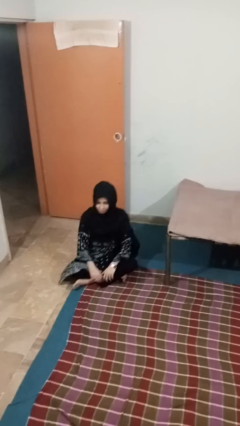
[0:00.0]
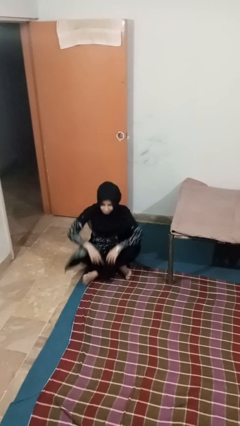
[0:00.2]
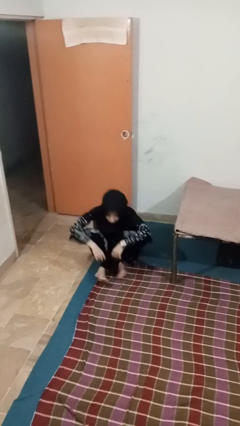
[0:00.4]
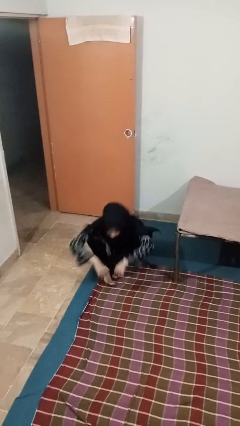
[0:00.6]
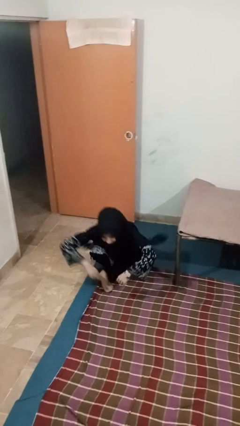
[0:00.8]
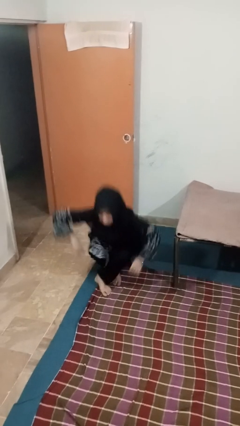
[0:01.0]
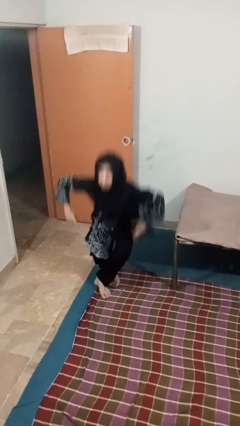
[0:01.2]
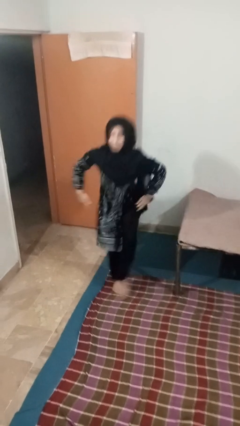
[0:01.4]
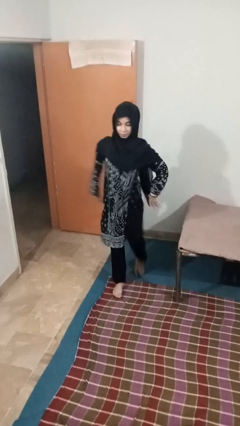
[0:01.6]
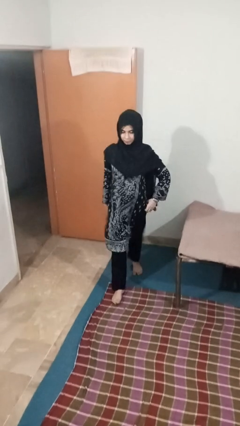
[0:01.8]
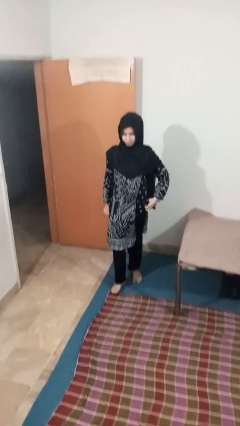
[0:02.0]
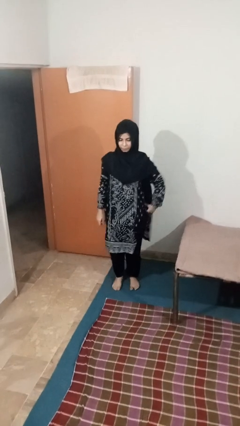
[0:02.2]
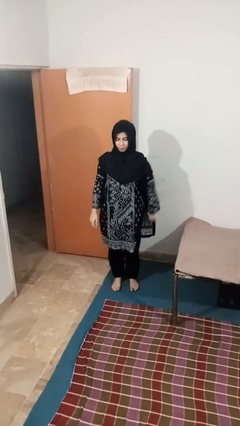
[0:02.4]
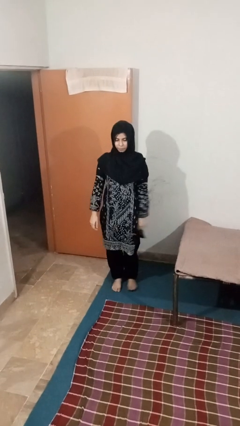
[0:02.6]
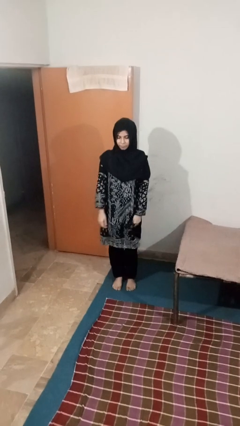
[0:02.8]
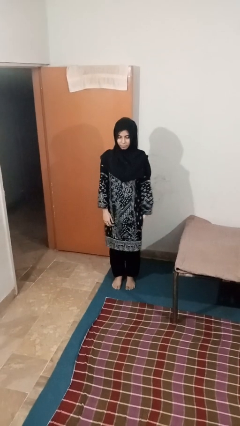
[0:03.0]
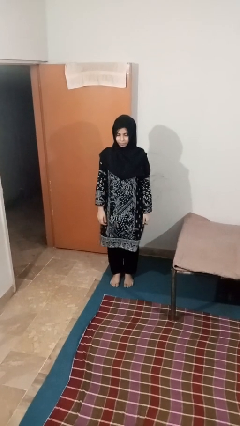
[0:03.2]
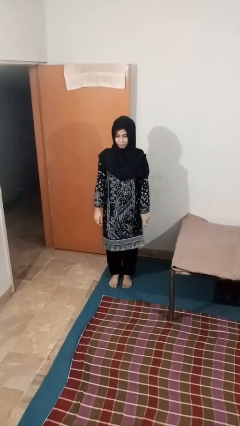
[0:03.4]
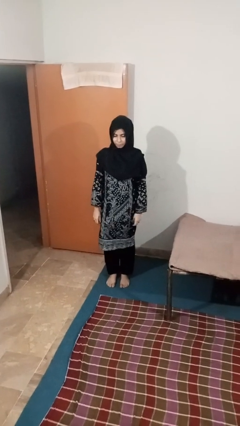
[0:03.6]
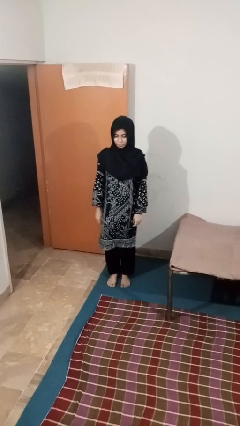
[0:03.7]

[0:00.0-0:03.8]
person stands up from floor

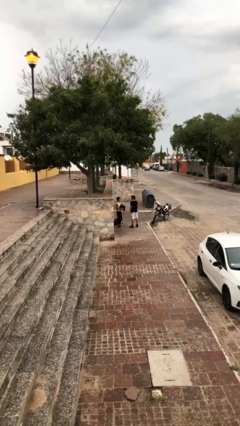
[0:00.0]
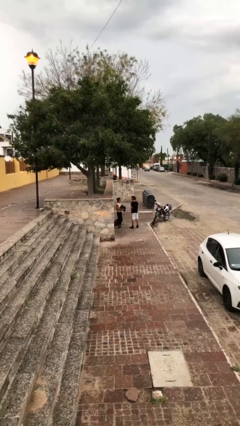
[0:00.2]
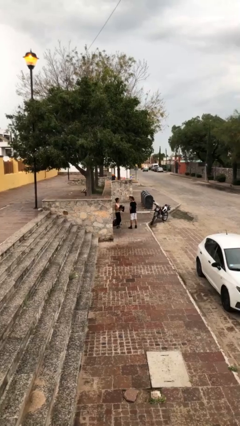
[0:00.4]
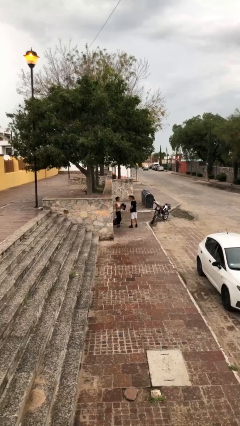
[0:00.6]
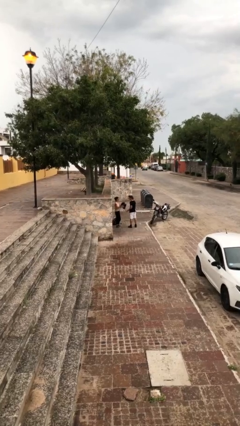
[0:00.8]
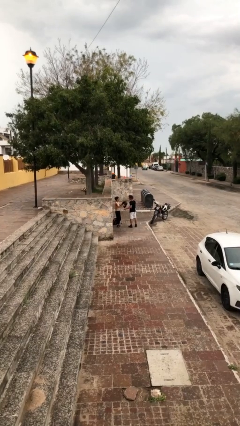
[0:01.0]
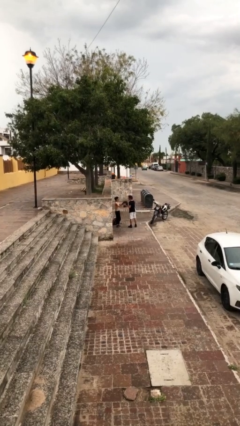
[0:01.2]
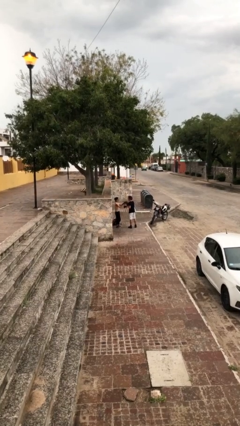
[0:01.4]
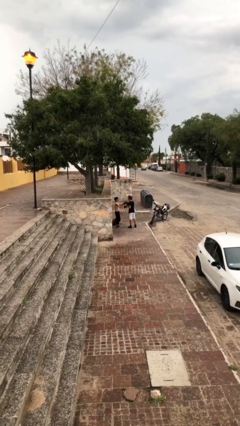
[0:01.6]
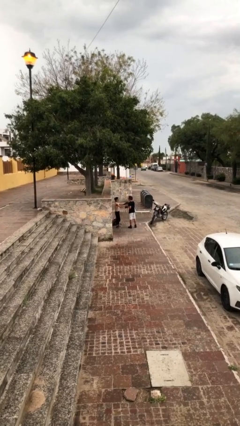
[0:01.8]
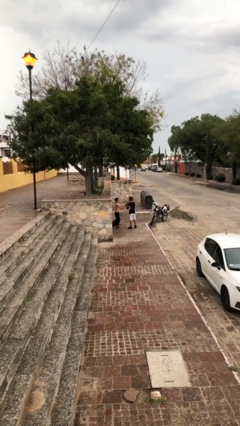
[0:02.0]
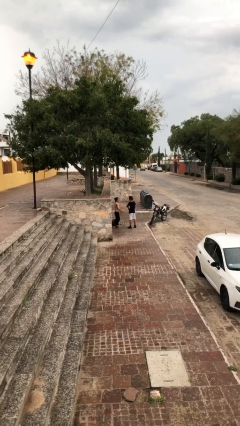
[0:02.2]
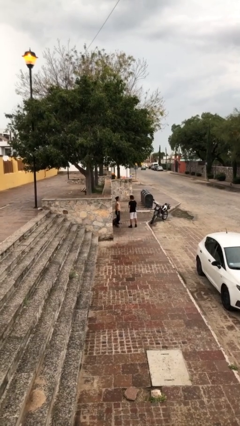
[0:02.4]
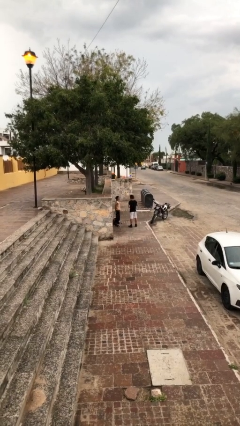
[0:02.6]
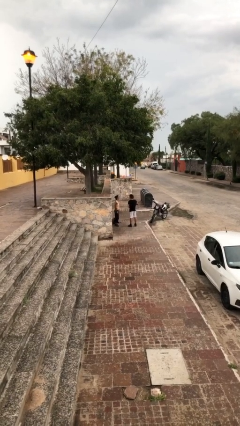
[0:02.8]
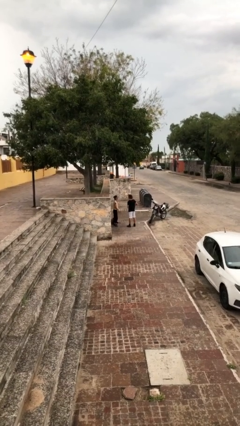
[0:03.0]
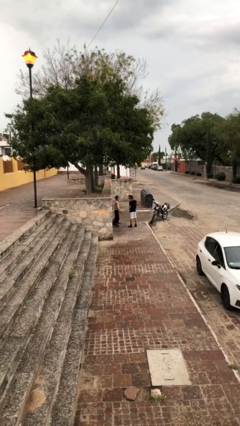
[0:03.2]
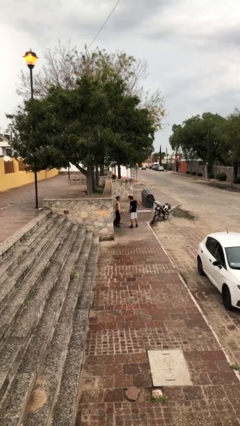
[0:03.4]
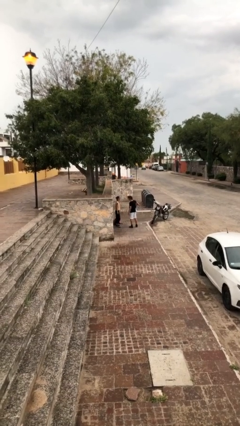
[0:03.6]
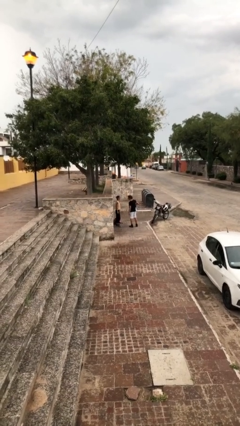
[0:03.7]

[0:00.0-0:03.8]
person transfers object to person

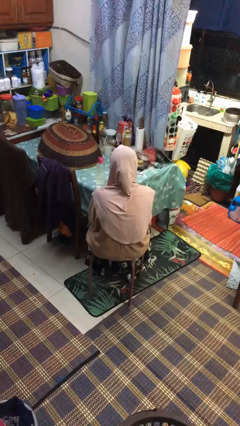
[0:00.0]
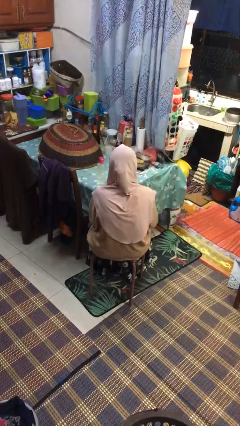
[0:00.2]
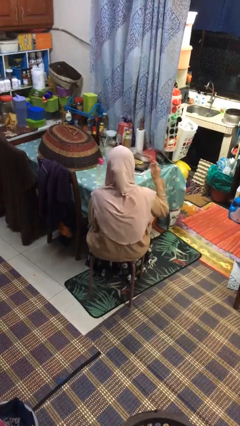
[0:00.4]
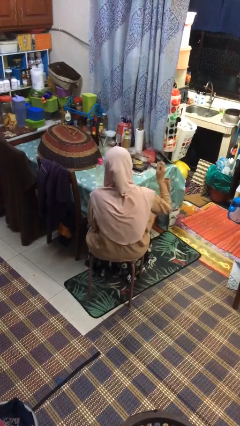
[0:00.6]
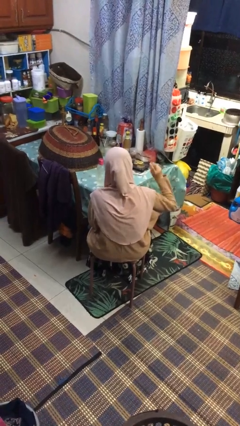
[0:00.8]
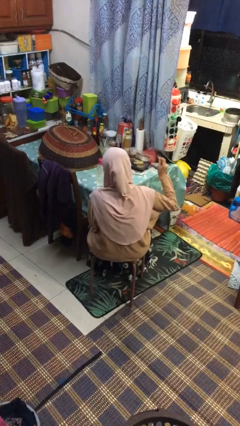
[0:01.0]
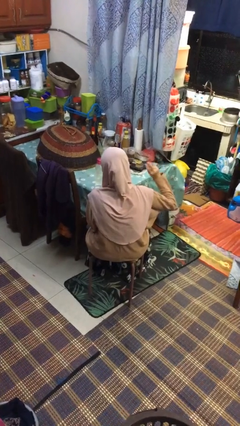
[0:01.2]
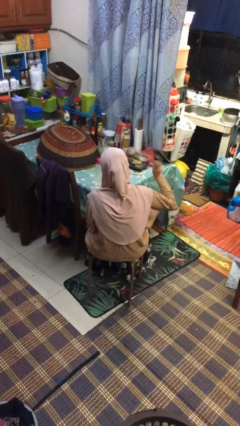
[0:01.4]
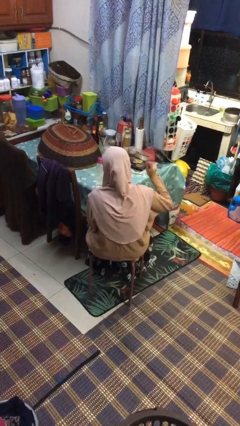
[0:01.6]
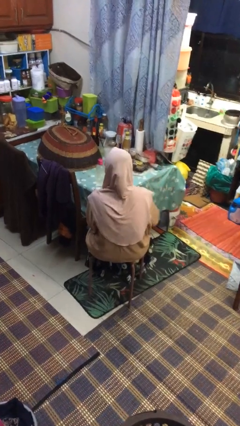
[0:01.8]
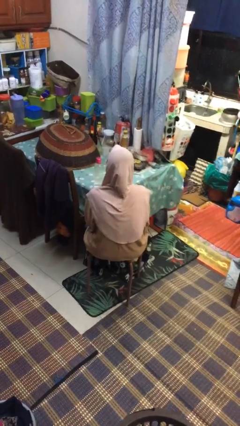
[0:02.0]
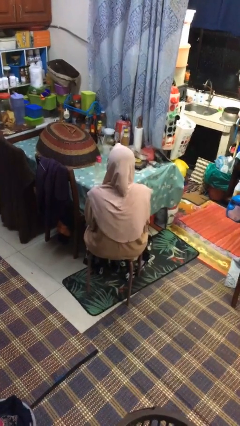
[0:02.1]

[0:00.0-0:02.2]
person snaps fingers

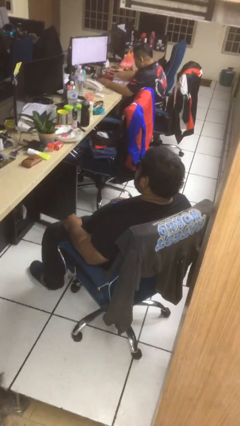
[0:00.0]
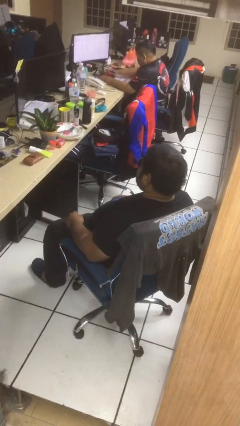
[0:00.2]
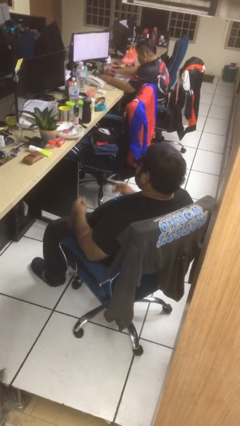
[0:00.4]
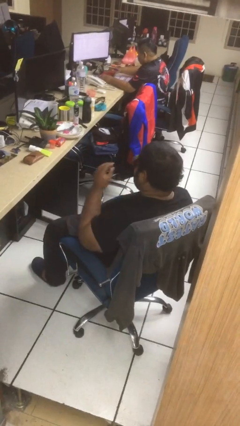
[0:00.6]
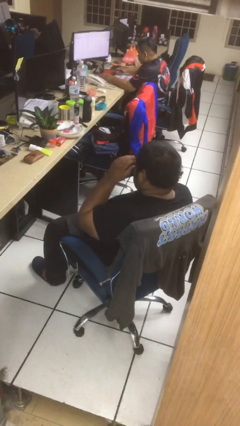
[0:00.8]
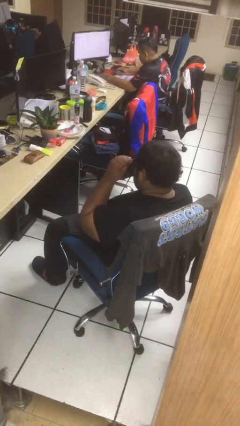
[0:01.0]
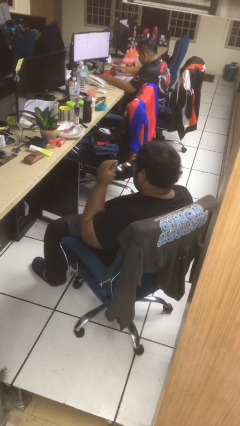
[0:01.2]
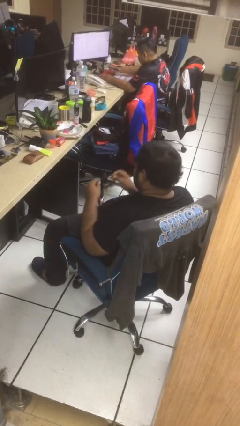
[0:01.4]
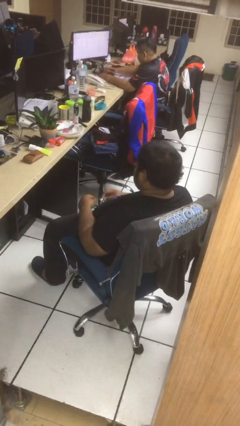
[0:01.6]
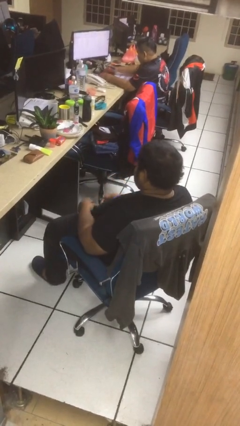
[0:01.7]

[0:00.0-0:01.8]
person takes off sunglasses

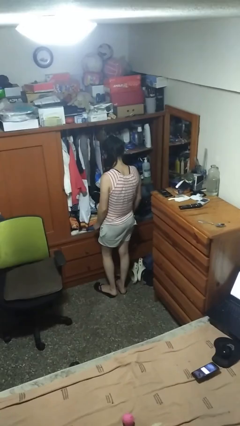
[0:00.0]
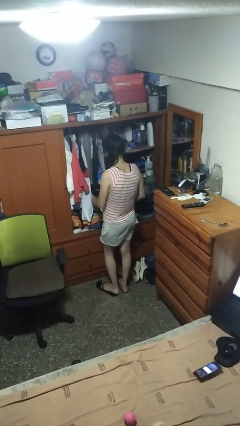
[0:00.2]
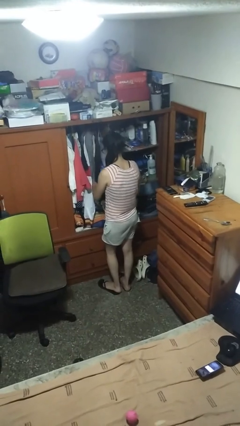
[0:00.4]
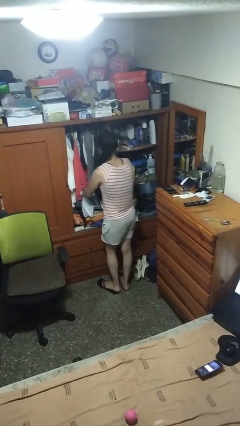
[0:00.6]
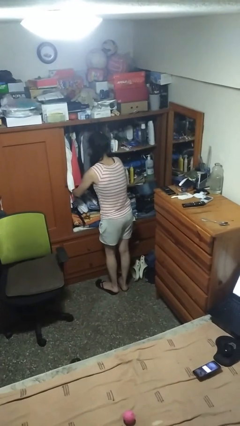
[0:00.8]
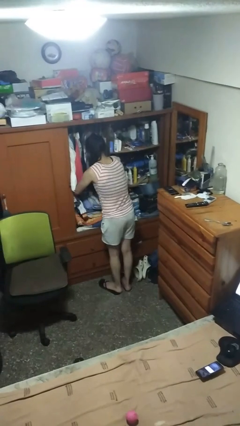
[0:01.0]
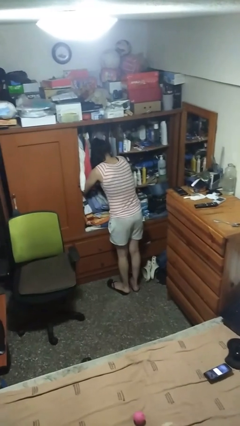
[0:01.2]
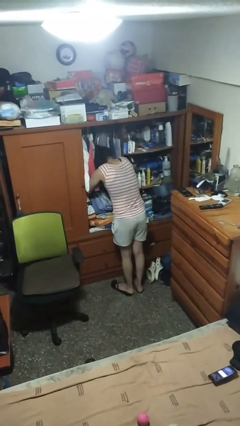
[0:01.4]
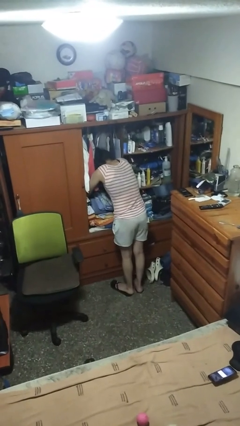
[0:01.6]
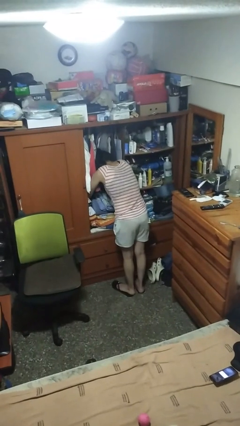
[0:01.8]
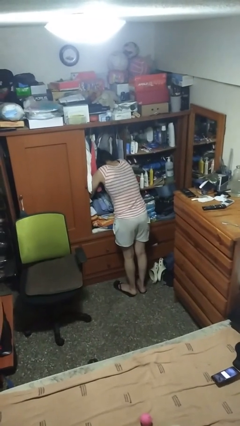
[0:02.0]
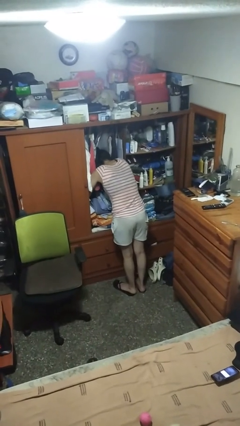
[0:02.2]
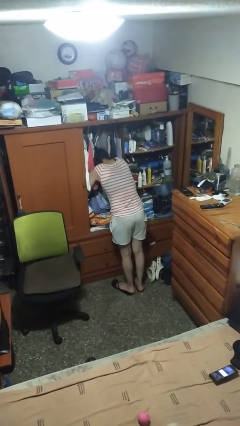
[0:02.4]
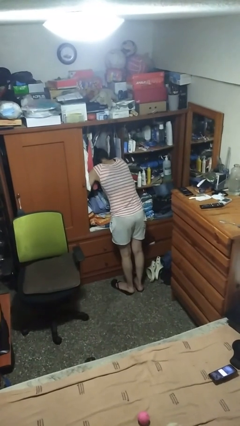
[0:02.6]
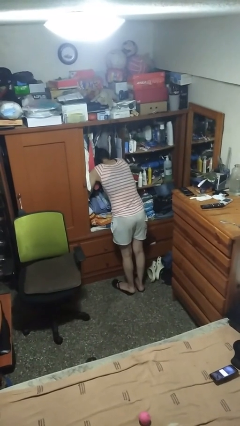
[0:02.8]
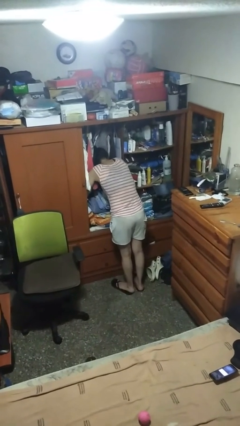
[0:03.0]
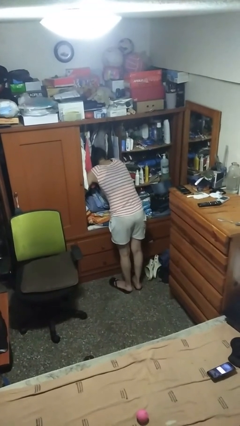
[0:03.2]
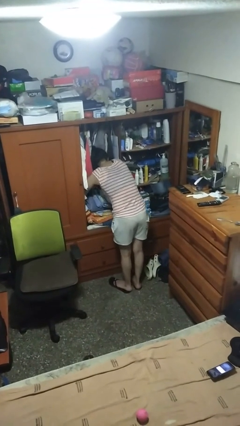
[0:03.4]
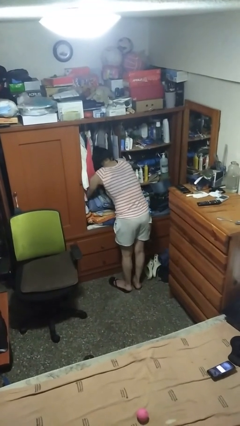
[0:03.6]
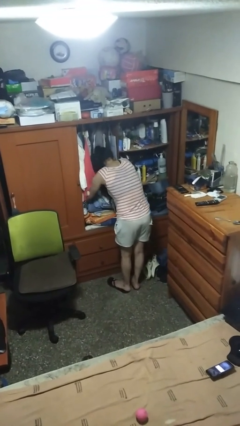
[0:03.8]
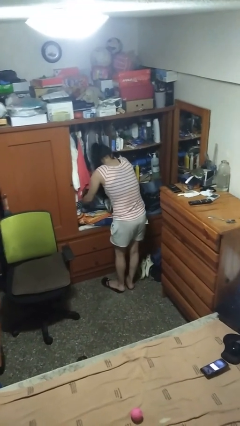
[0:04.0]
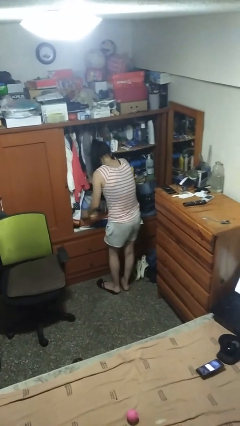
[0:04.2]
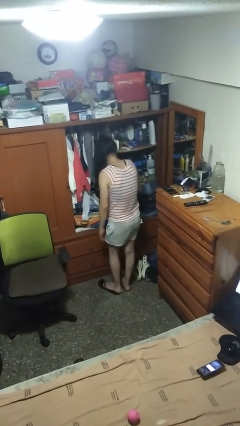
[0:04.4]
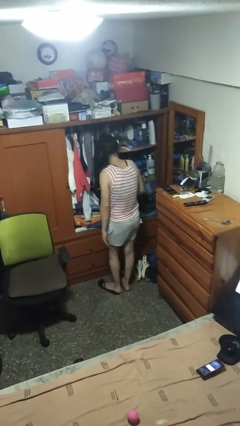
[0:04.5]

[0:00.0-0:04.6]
person searches in cabinet

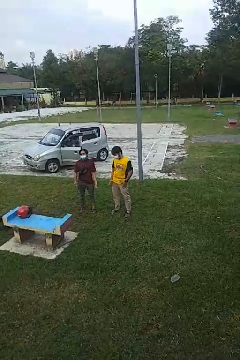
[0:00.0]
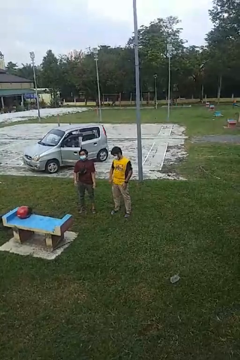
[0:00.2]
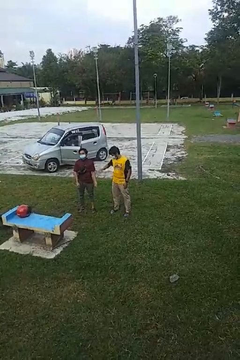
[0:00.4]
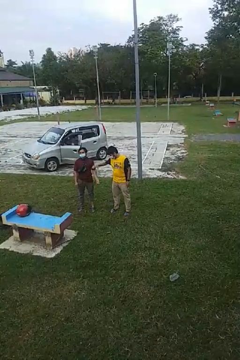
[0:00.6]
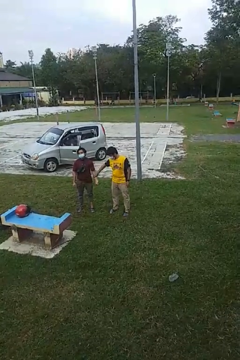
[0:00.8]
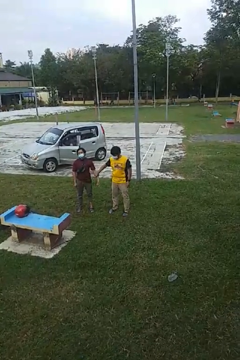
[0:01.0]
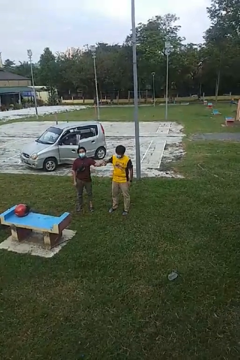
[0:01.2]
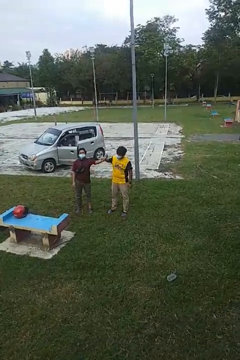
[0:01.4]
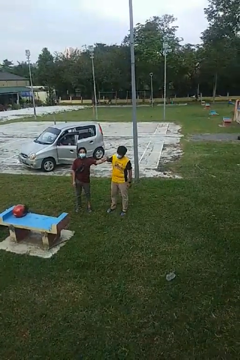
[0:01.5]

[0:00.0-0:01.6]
person grabs person by forearm
